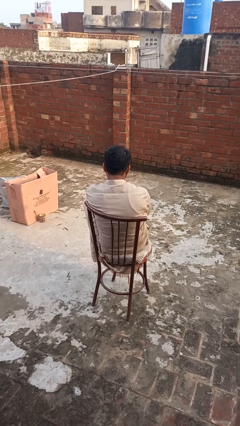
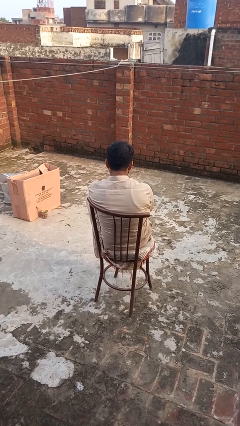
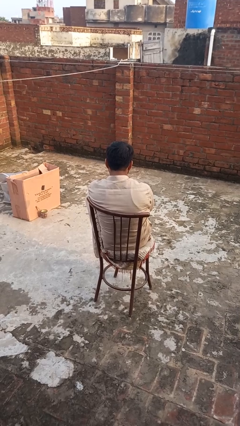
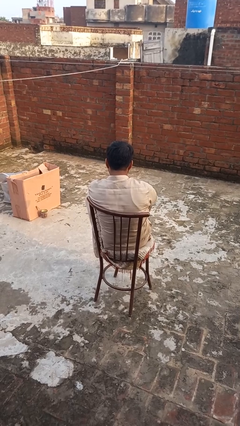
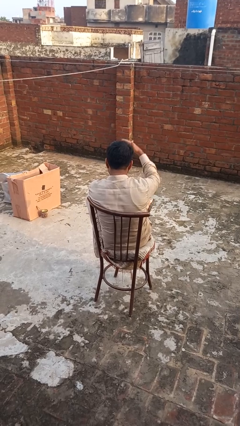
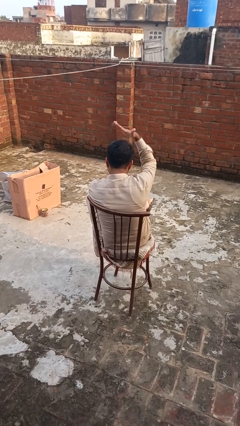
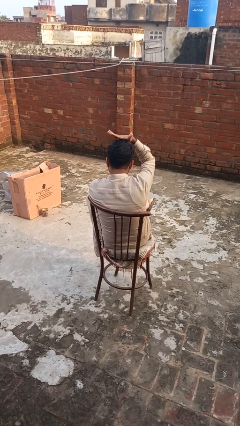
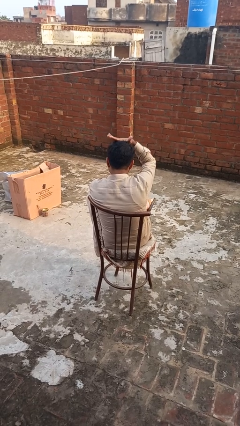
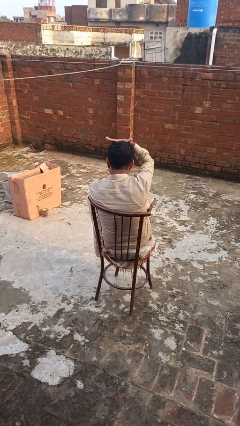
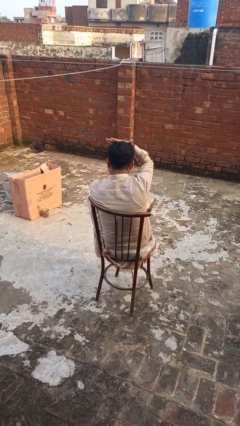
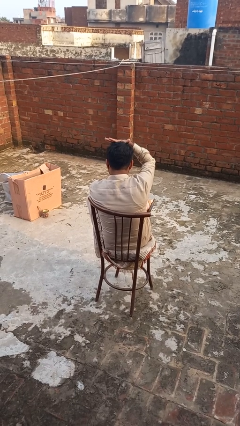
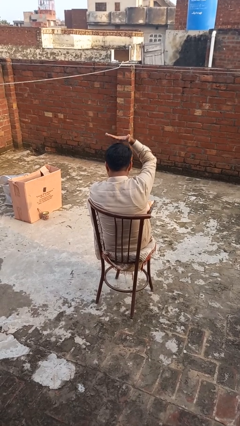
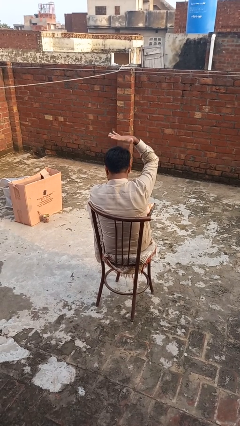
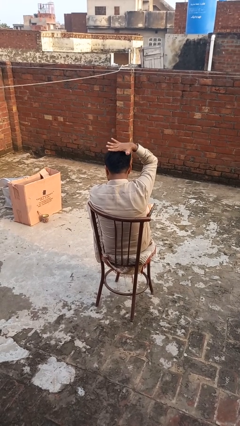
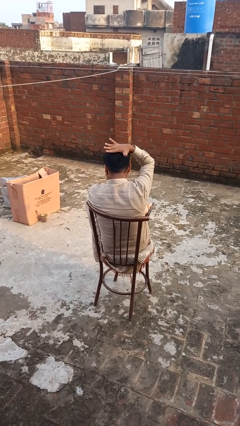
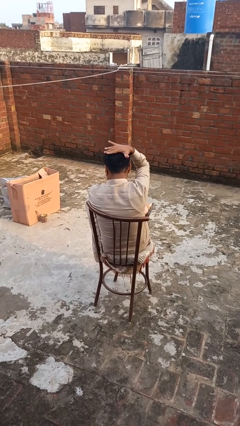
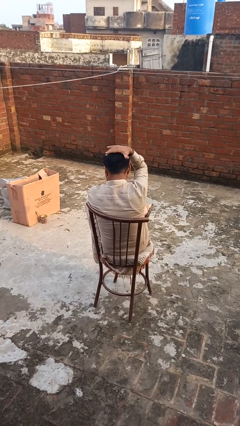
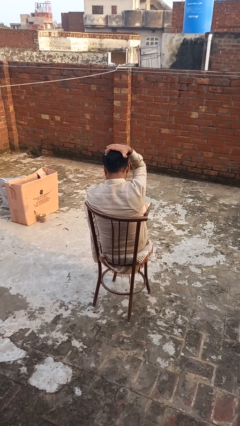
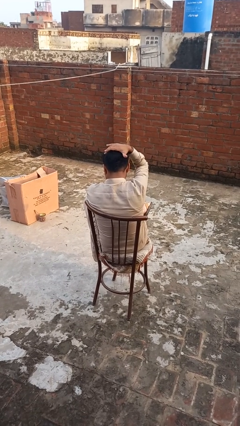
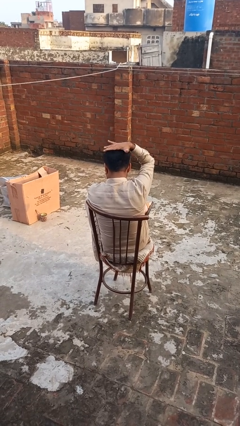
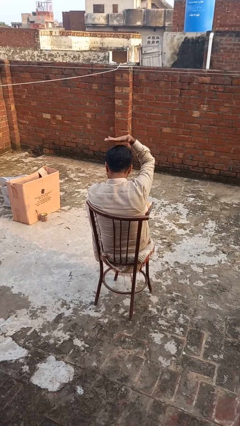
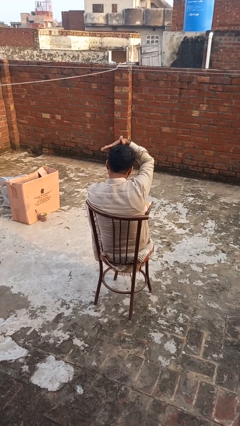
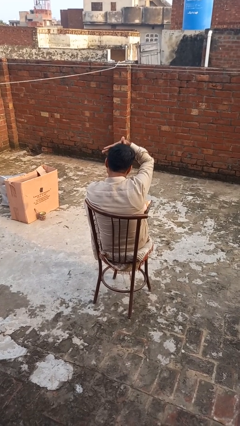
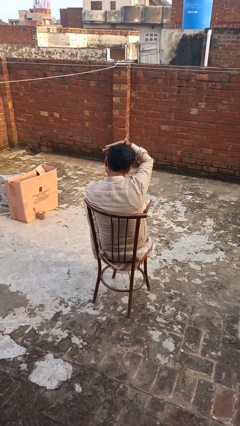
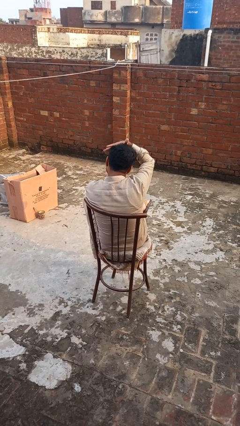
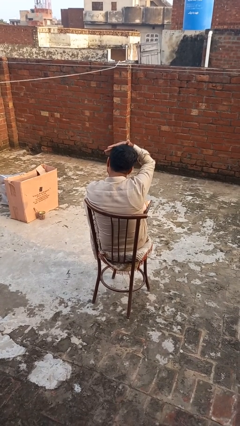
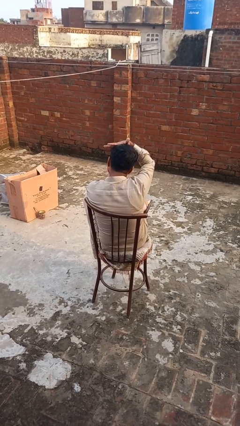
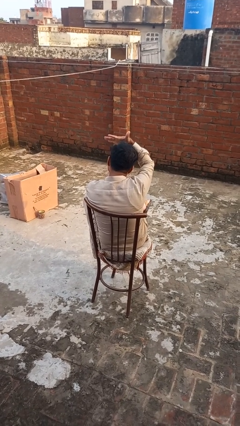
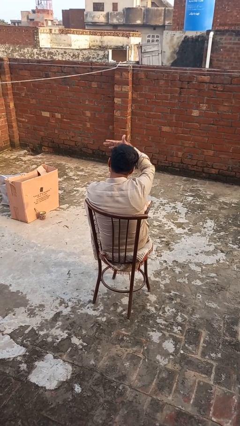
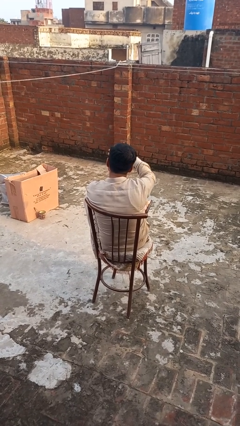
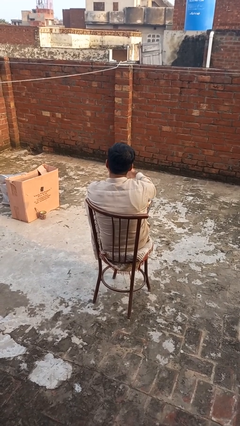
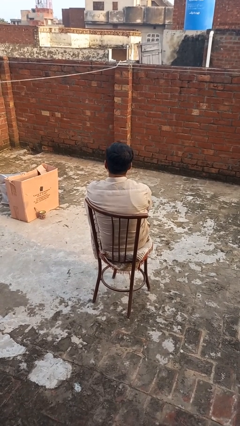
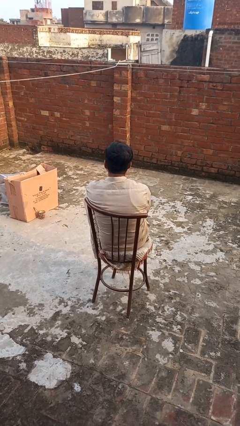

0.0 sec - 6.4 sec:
person pats head

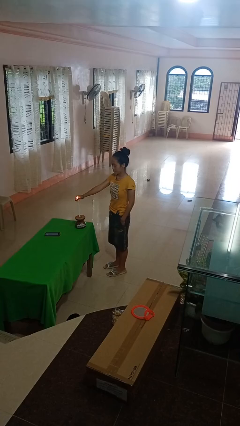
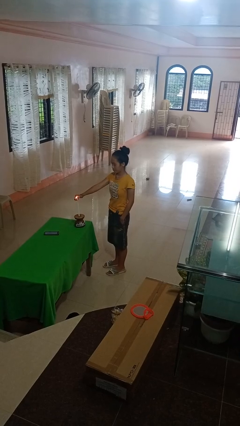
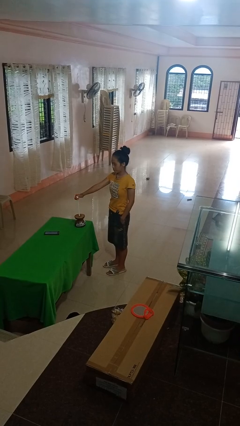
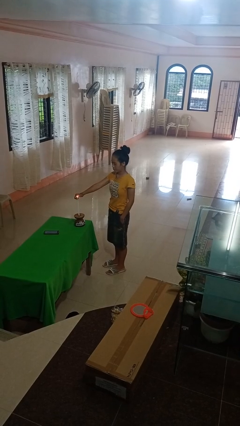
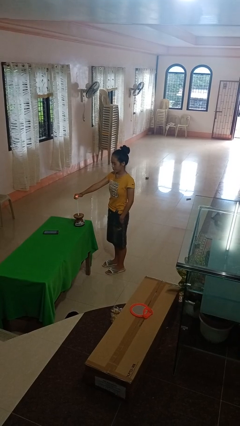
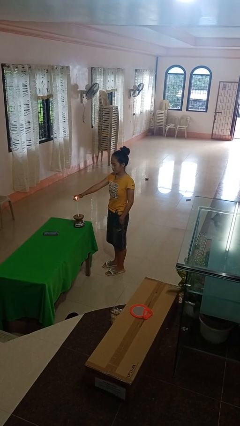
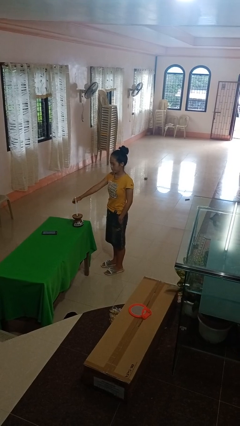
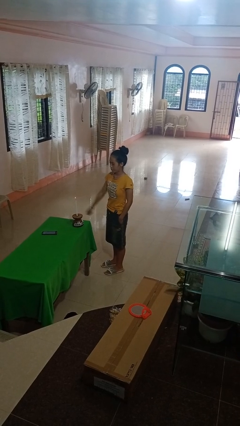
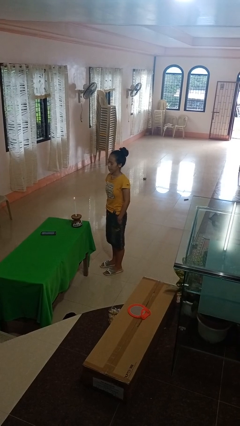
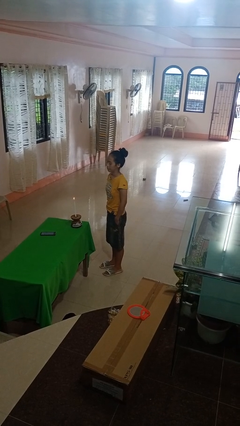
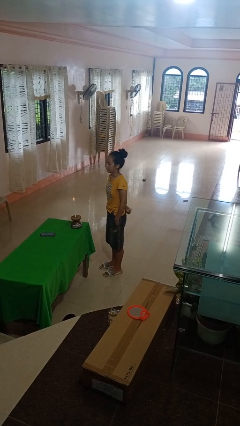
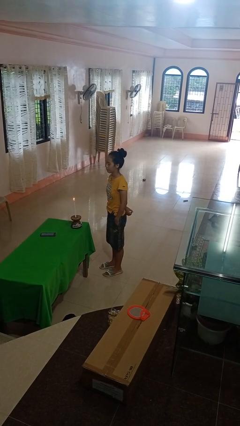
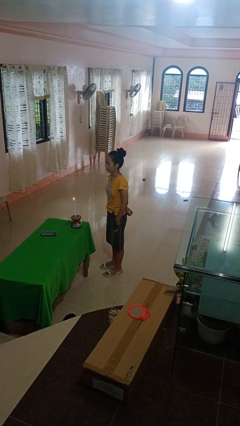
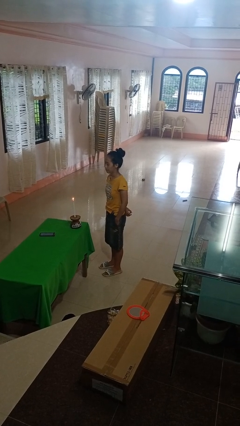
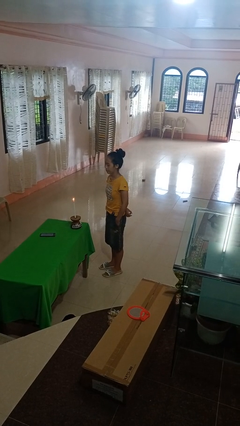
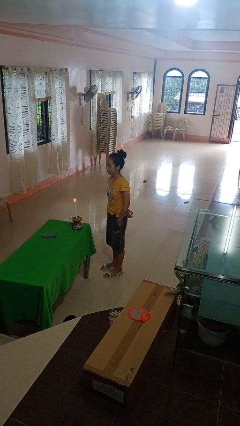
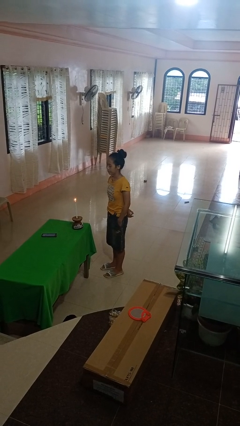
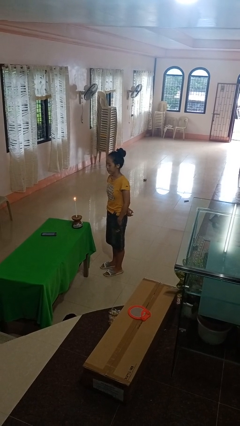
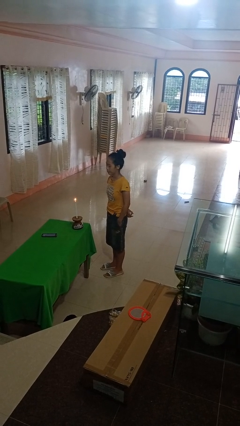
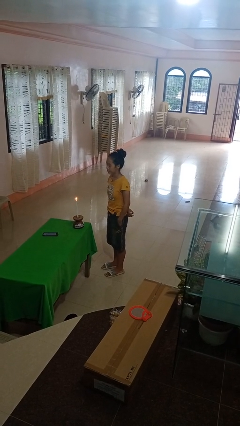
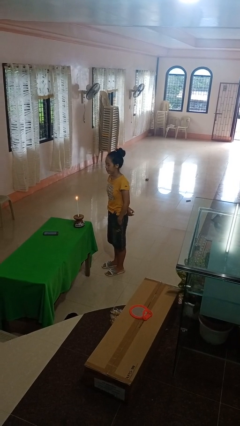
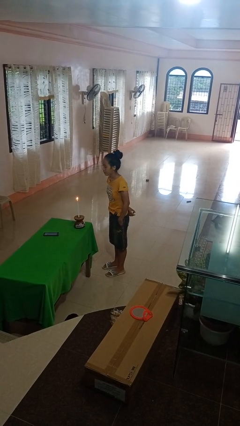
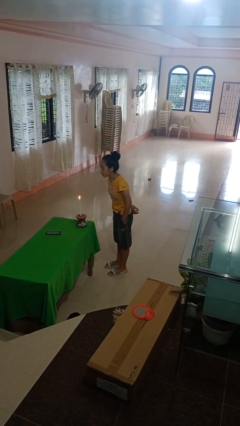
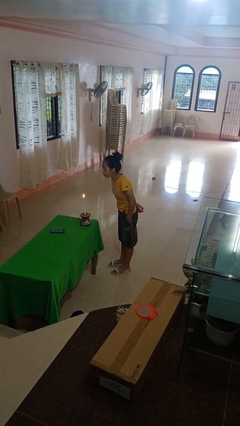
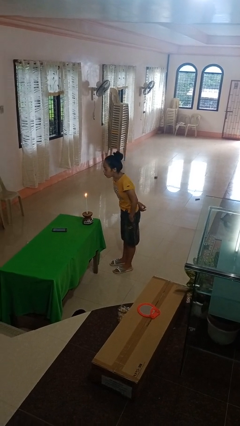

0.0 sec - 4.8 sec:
person lights candle

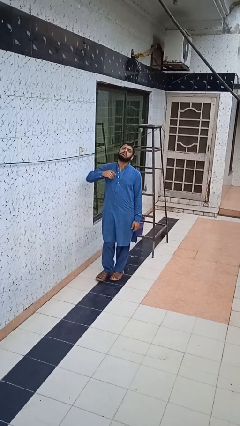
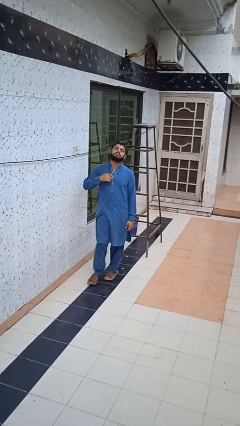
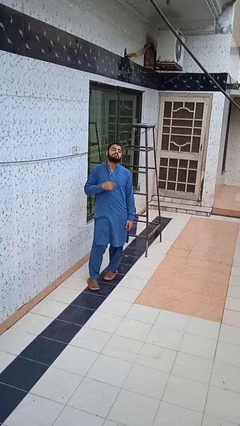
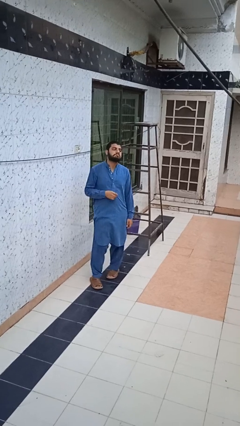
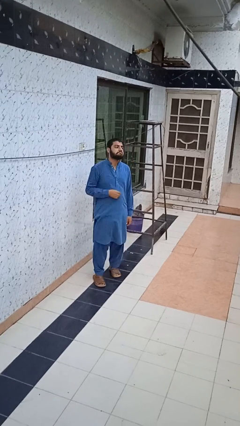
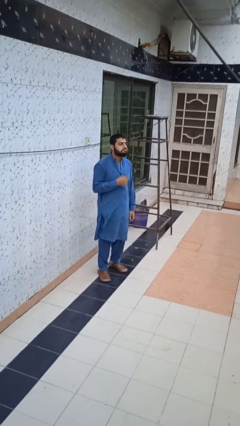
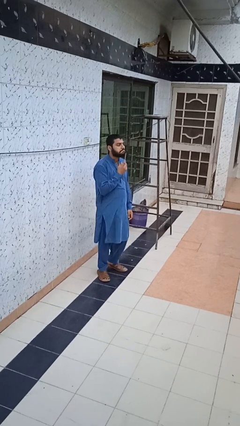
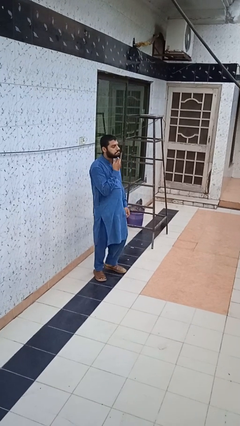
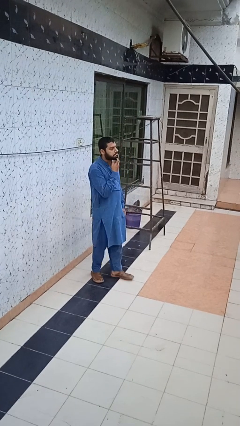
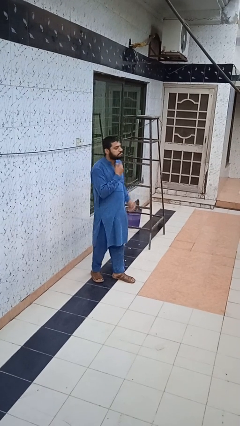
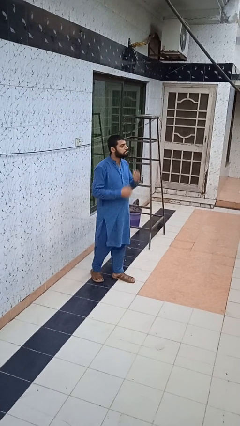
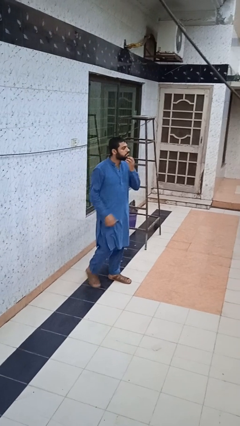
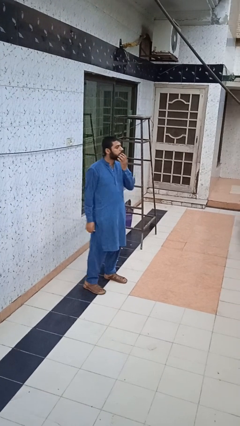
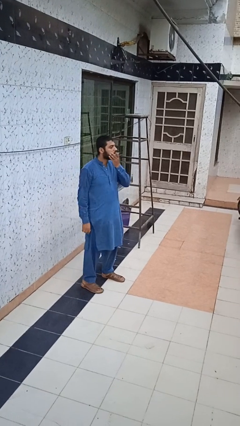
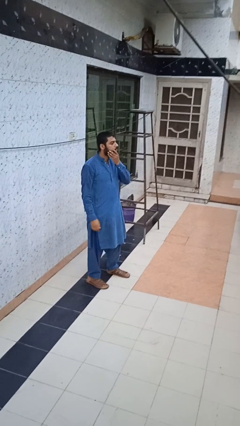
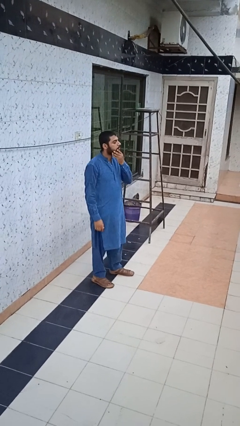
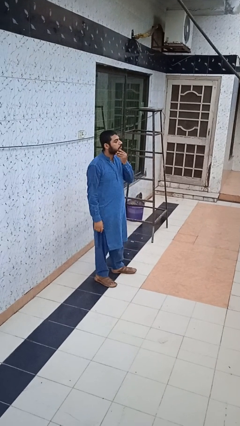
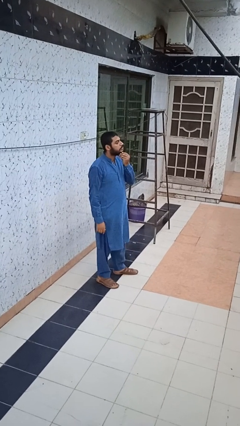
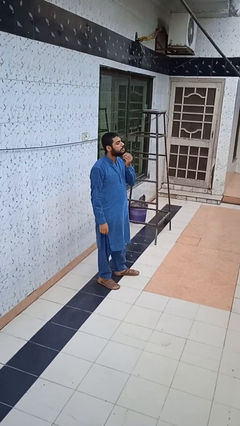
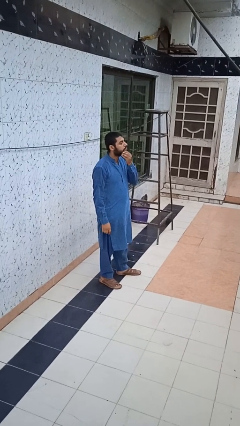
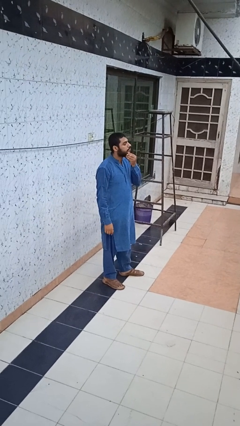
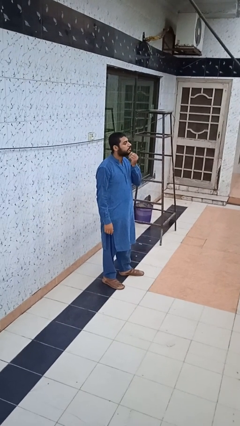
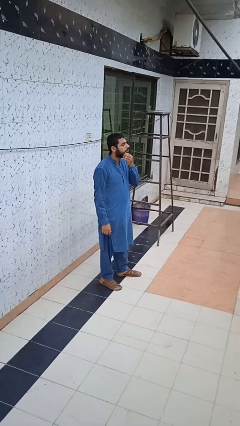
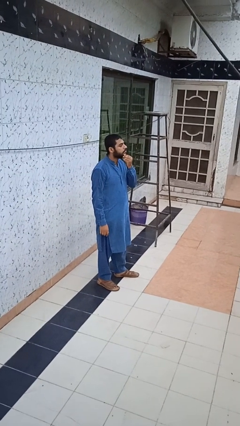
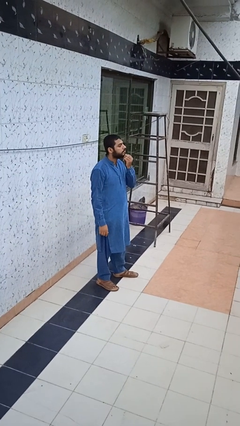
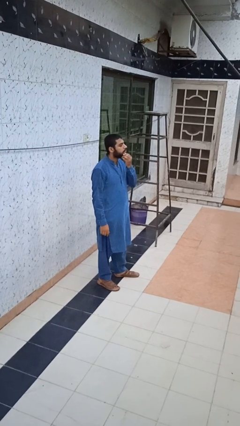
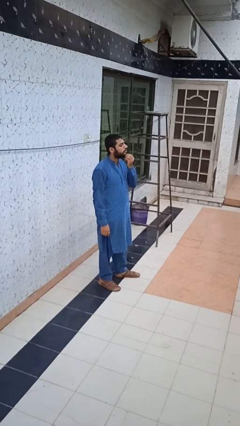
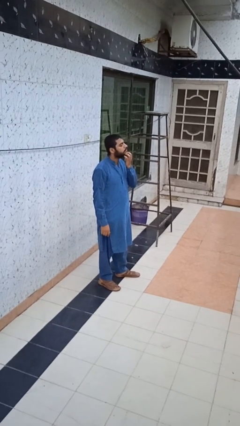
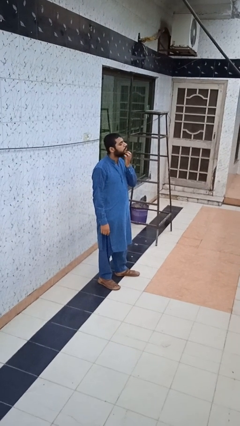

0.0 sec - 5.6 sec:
person strokes chin

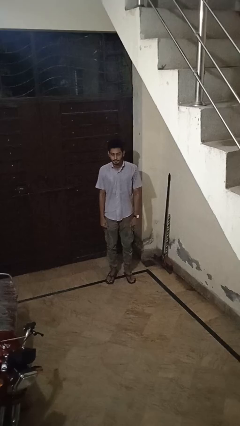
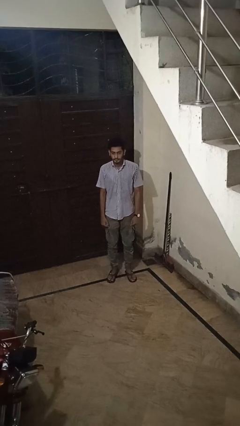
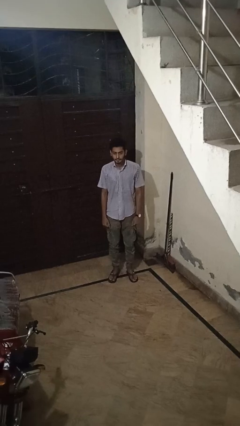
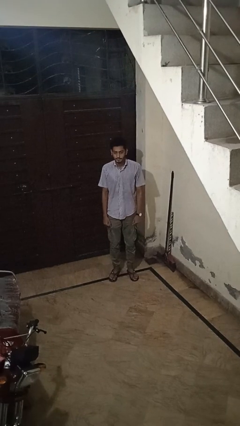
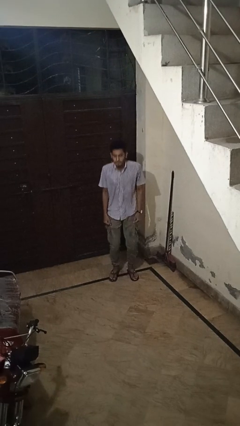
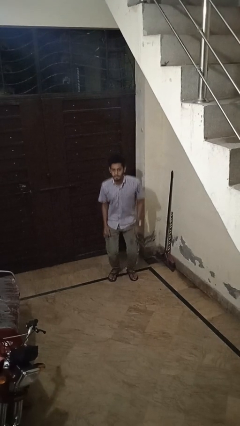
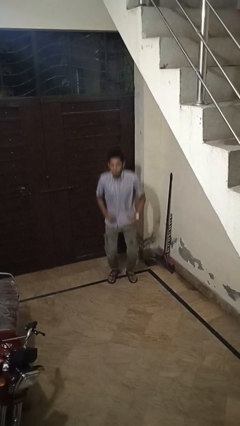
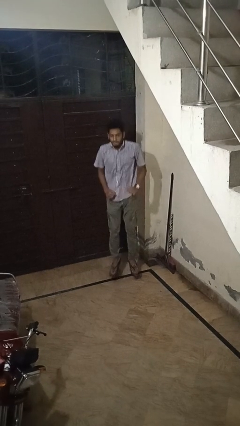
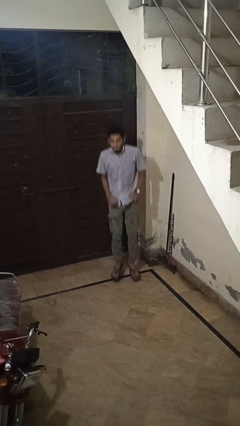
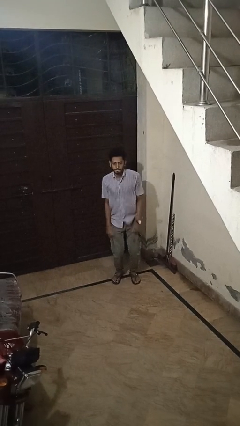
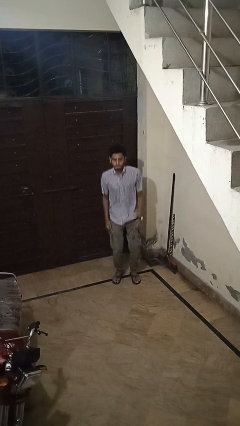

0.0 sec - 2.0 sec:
person jumps
